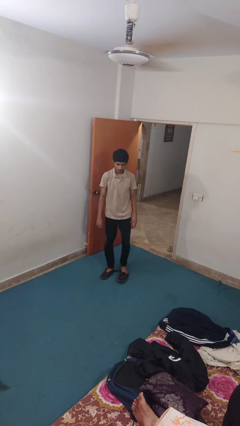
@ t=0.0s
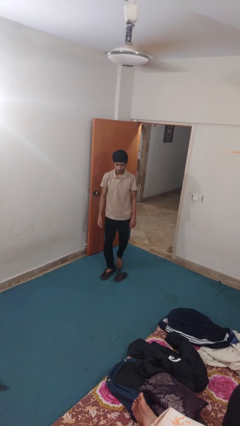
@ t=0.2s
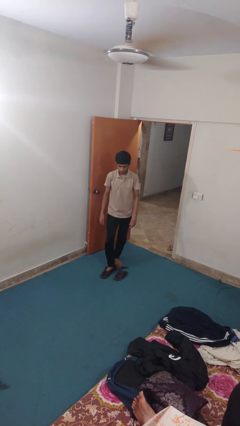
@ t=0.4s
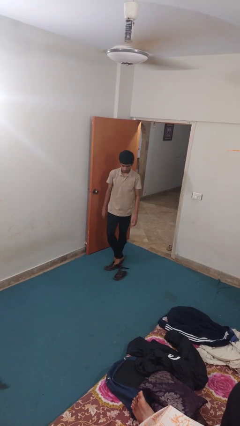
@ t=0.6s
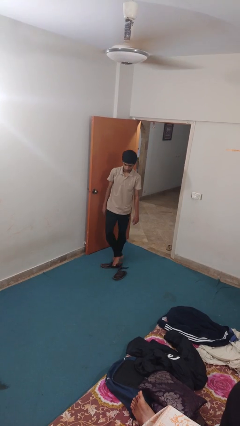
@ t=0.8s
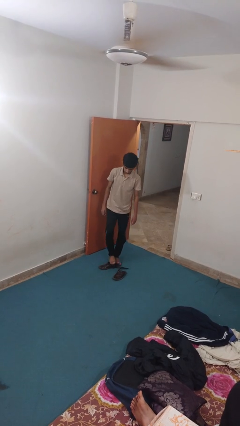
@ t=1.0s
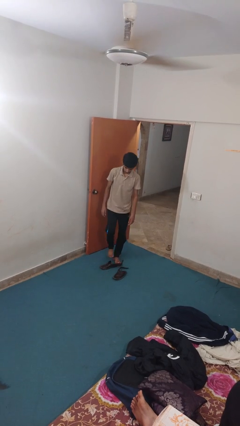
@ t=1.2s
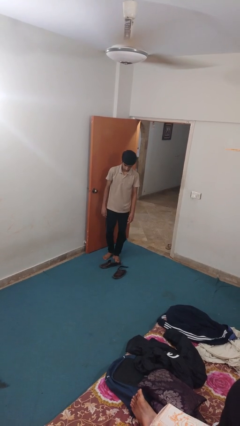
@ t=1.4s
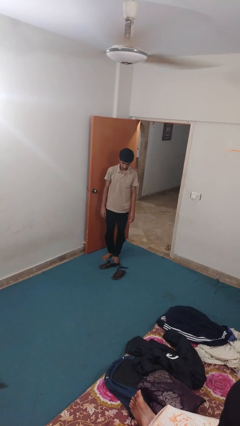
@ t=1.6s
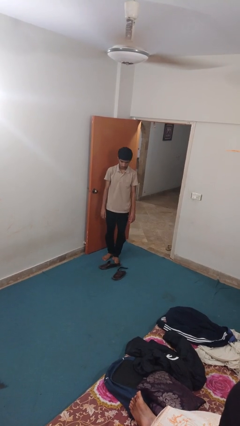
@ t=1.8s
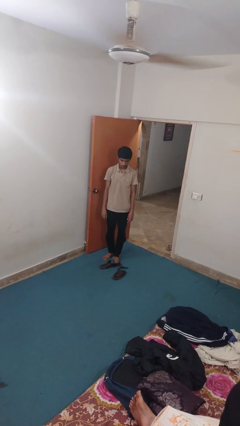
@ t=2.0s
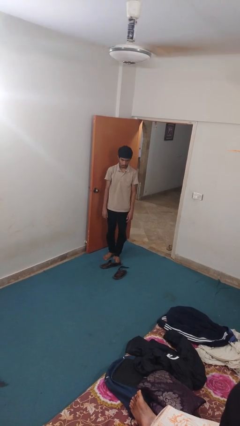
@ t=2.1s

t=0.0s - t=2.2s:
person takes off shoes

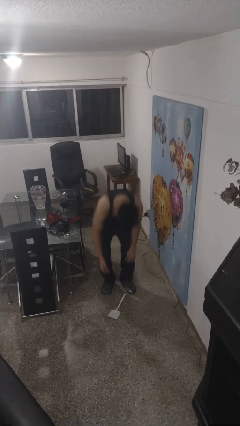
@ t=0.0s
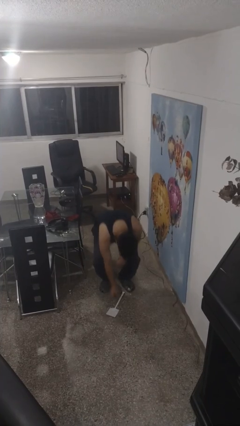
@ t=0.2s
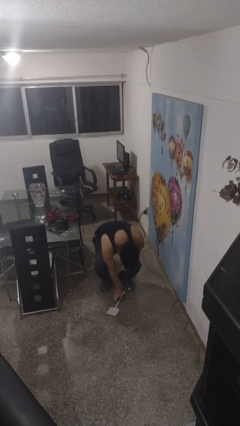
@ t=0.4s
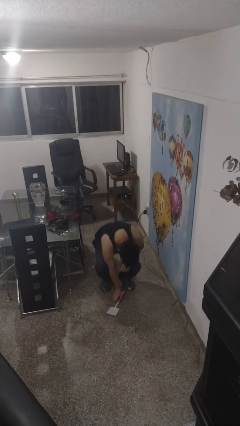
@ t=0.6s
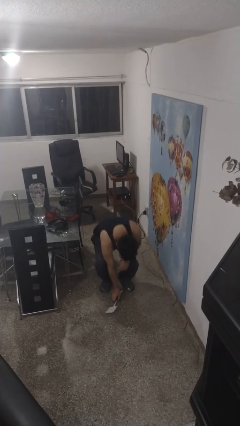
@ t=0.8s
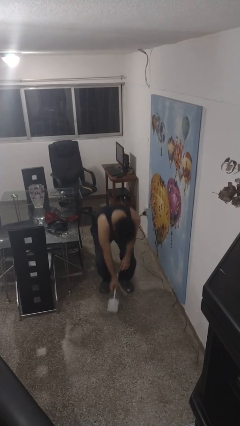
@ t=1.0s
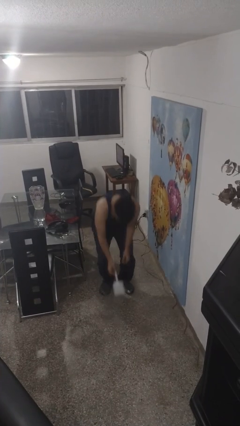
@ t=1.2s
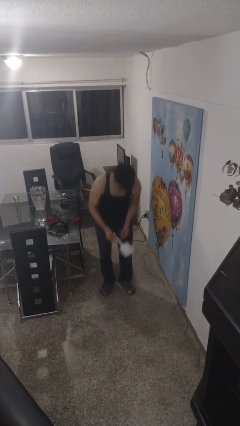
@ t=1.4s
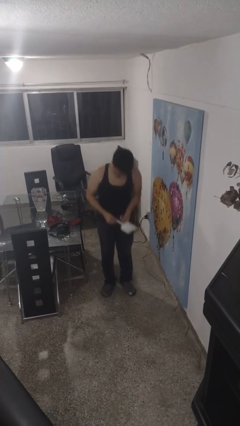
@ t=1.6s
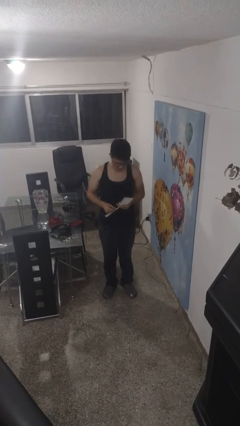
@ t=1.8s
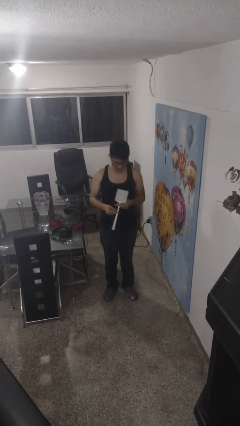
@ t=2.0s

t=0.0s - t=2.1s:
person picks up object from floor

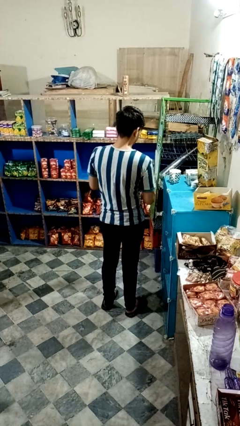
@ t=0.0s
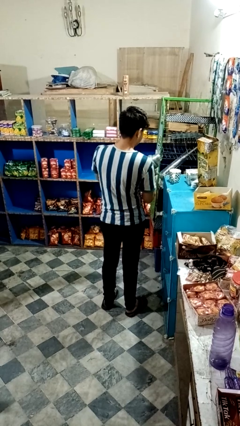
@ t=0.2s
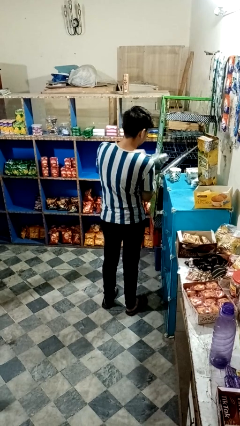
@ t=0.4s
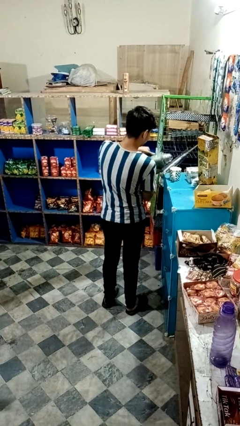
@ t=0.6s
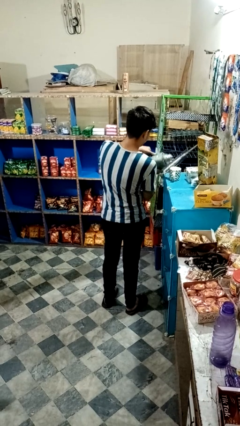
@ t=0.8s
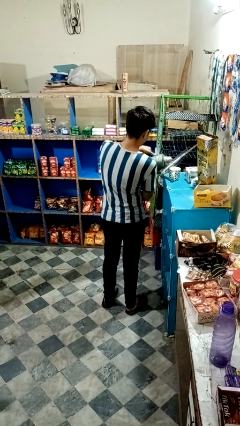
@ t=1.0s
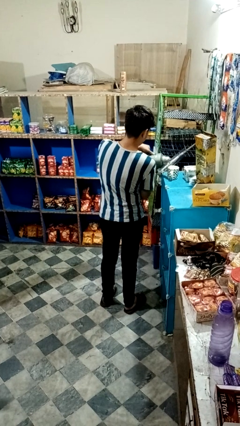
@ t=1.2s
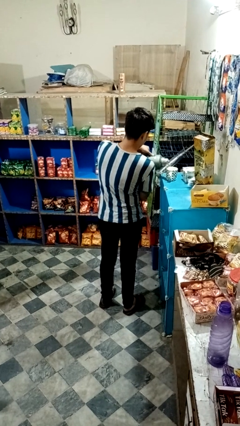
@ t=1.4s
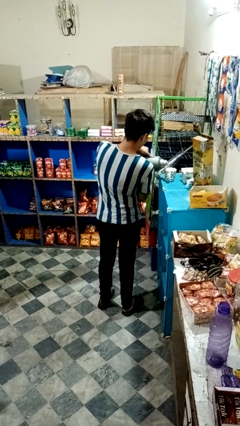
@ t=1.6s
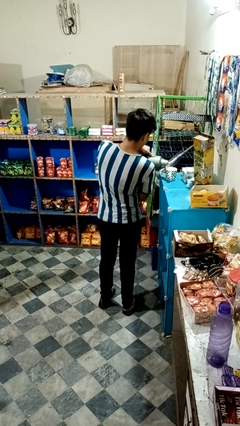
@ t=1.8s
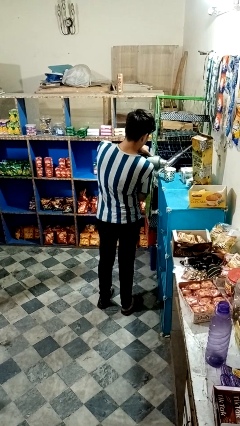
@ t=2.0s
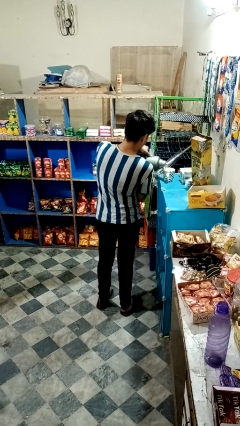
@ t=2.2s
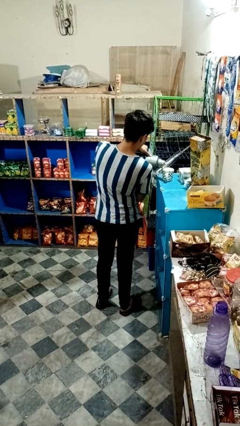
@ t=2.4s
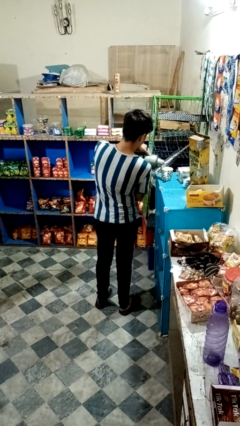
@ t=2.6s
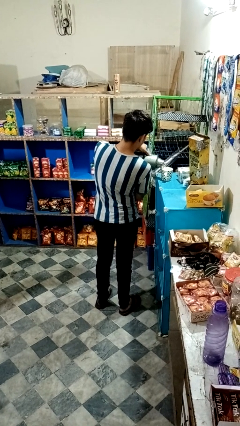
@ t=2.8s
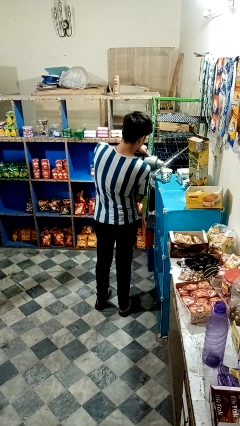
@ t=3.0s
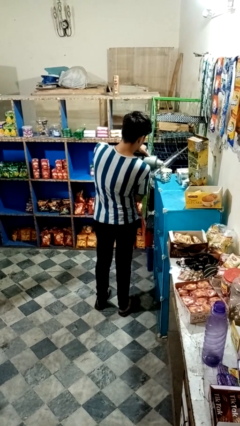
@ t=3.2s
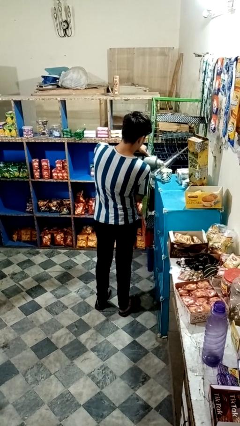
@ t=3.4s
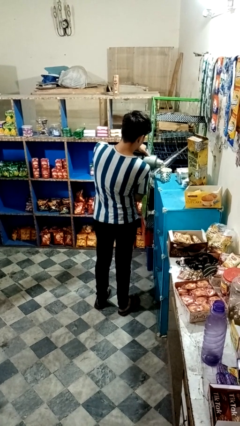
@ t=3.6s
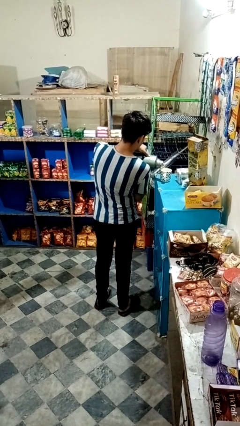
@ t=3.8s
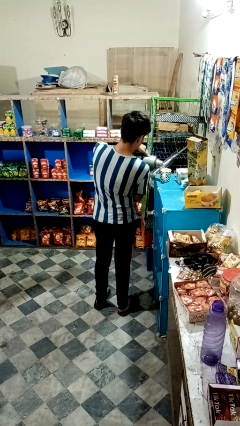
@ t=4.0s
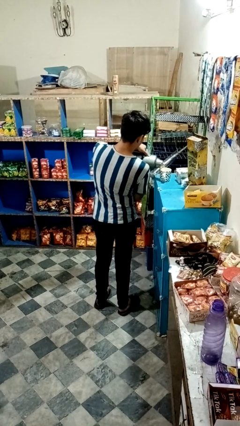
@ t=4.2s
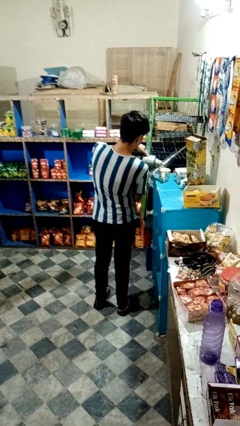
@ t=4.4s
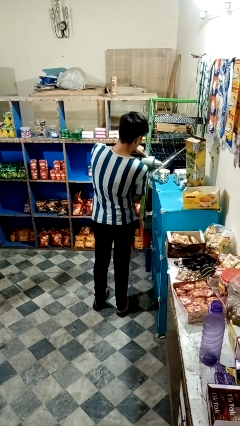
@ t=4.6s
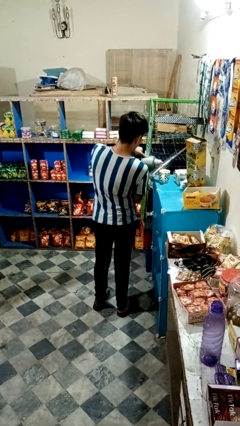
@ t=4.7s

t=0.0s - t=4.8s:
person pours coffee into mug

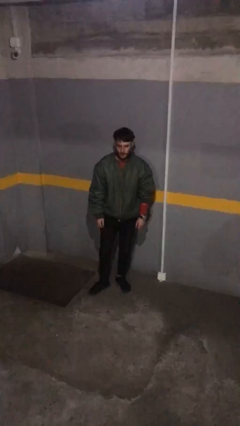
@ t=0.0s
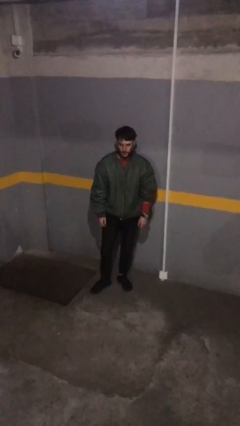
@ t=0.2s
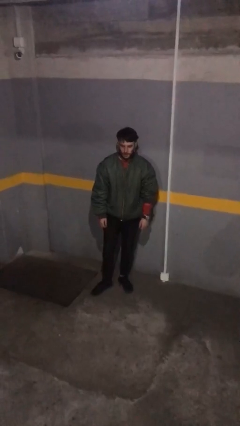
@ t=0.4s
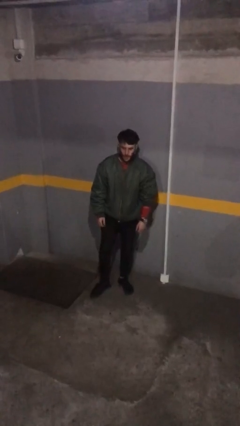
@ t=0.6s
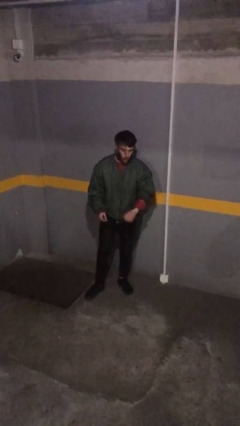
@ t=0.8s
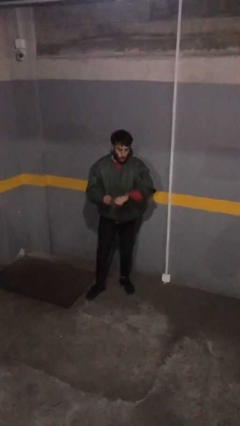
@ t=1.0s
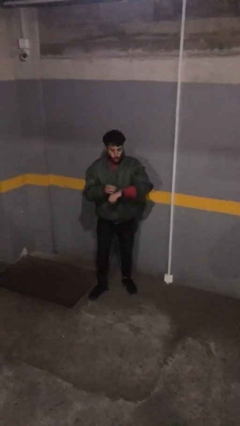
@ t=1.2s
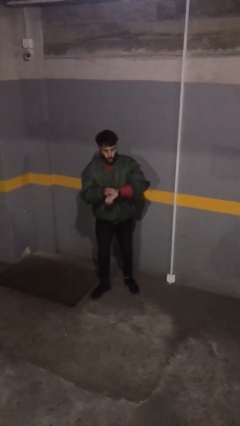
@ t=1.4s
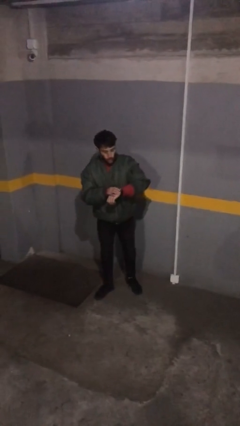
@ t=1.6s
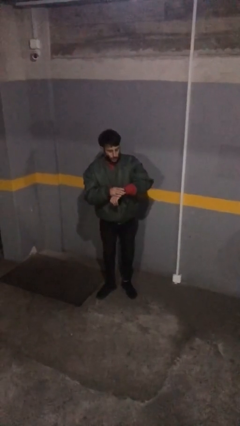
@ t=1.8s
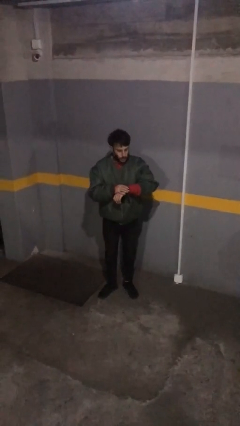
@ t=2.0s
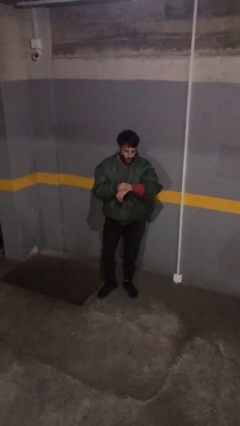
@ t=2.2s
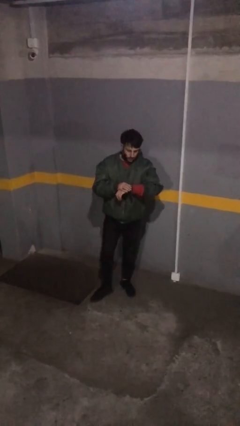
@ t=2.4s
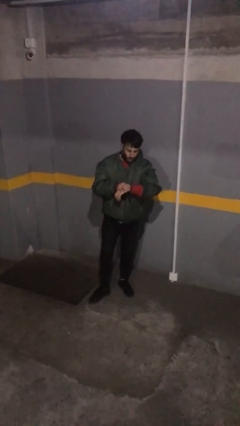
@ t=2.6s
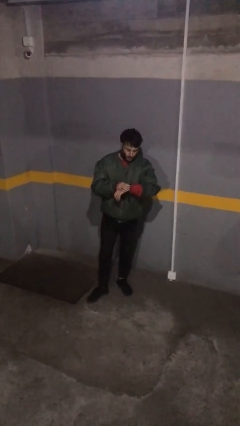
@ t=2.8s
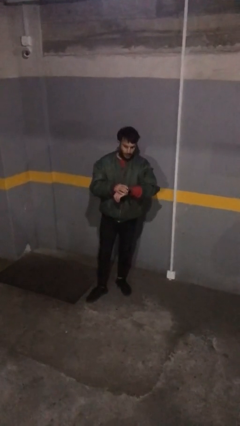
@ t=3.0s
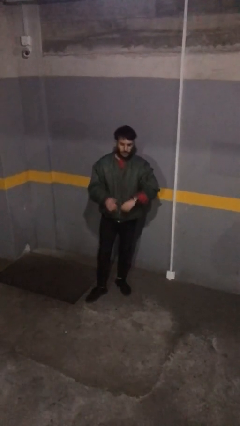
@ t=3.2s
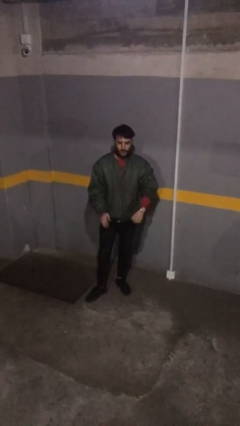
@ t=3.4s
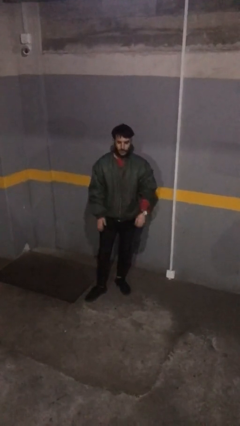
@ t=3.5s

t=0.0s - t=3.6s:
person looks at wristwatch

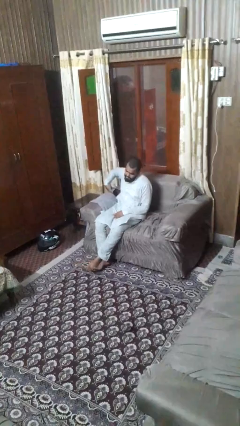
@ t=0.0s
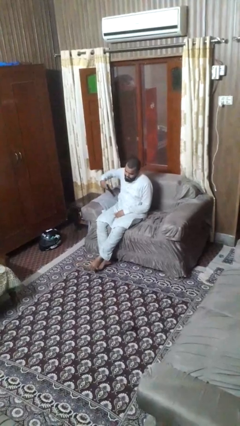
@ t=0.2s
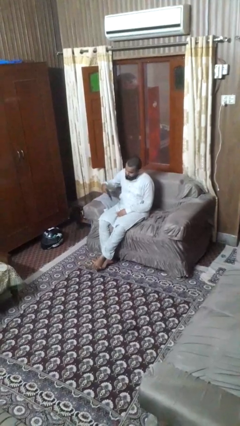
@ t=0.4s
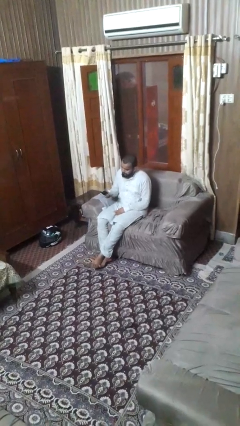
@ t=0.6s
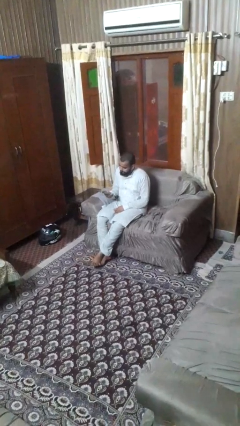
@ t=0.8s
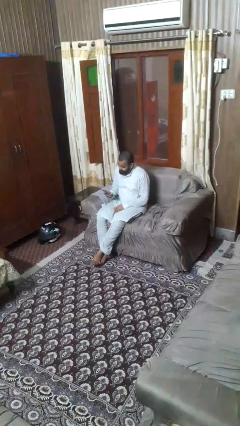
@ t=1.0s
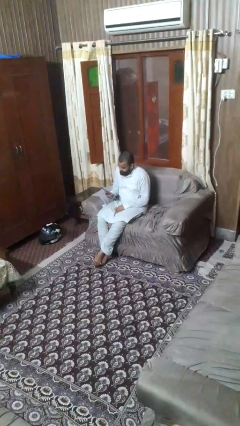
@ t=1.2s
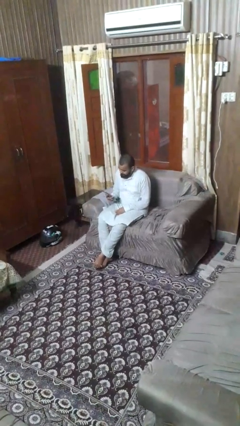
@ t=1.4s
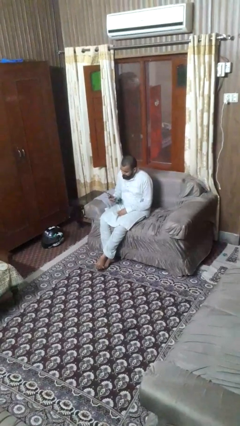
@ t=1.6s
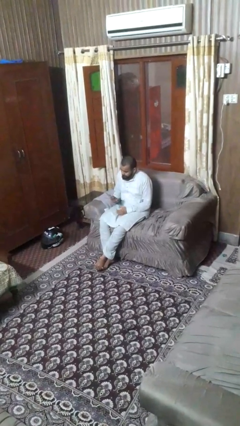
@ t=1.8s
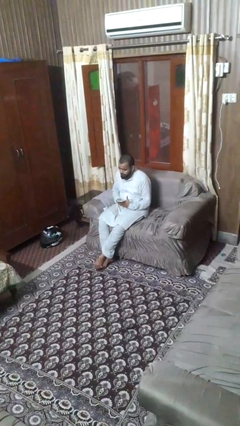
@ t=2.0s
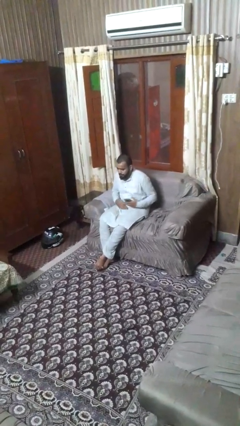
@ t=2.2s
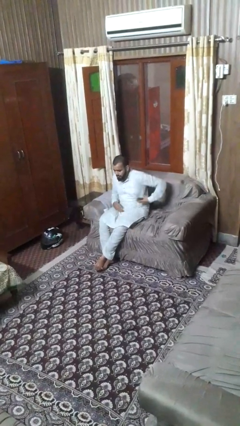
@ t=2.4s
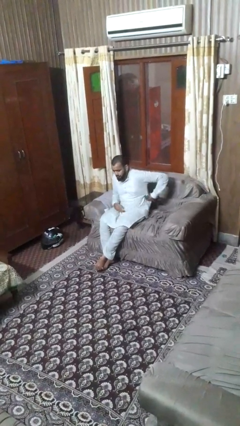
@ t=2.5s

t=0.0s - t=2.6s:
person takes phone from pocket

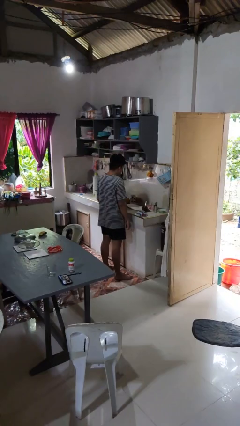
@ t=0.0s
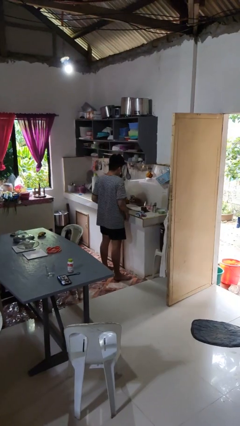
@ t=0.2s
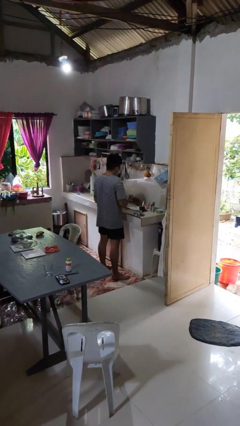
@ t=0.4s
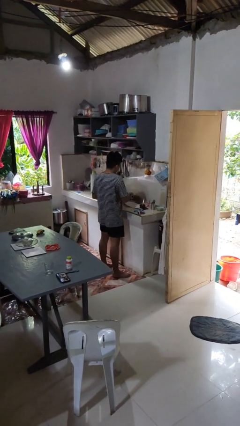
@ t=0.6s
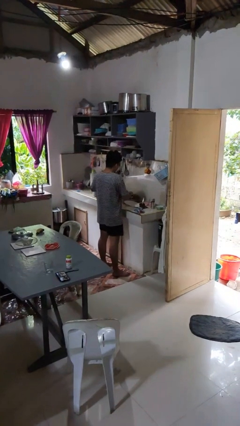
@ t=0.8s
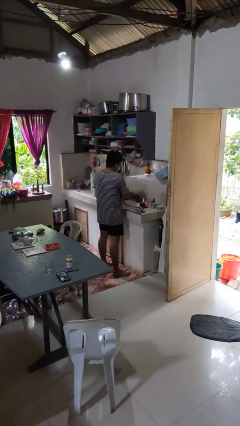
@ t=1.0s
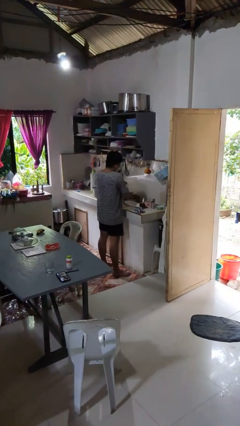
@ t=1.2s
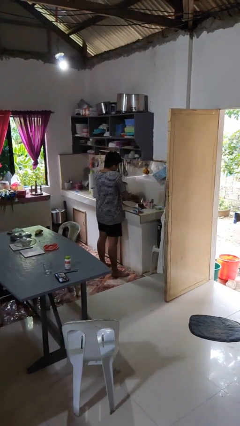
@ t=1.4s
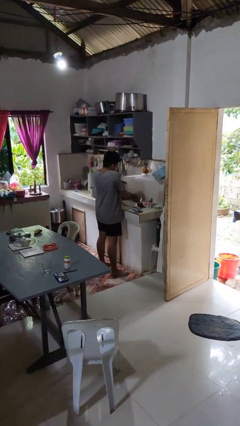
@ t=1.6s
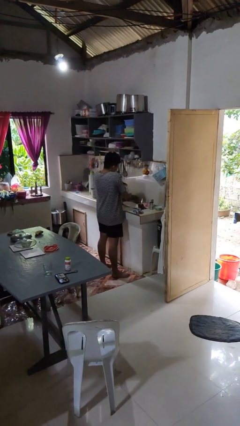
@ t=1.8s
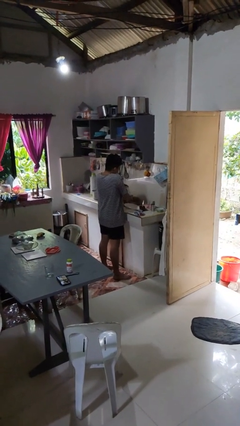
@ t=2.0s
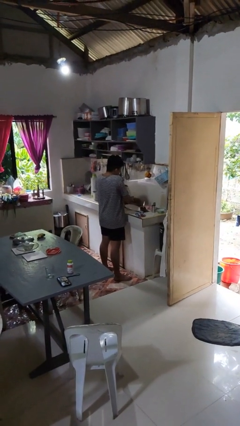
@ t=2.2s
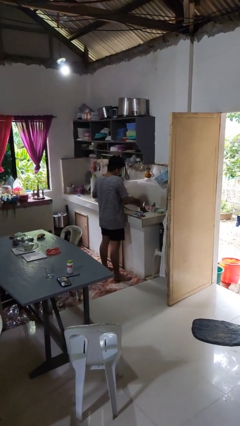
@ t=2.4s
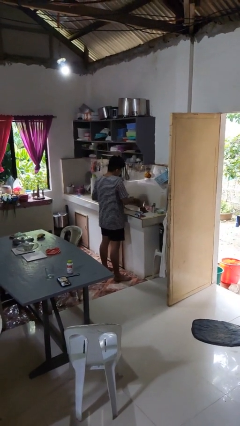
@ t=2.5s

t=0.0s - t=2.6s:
person washes hands
